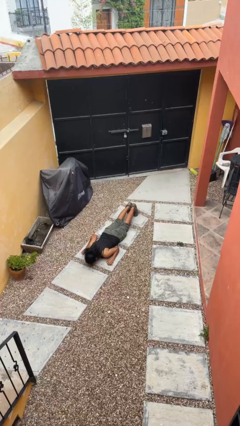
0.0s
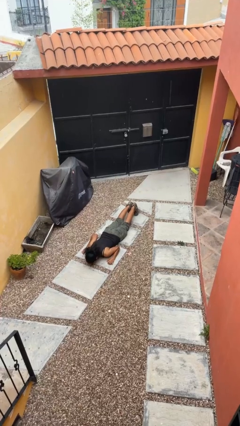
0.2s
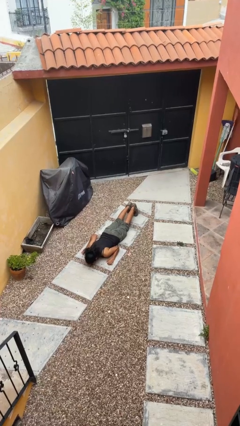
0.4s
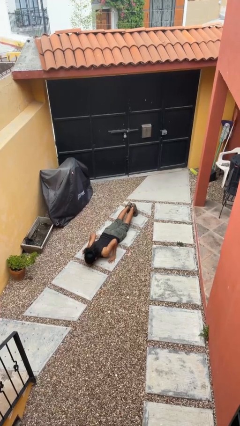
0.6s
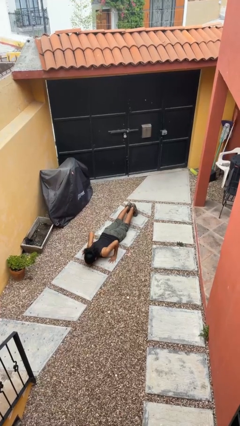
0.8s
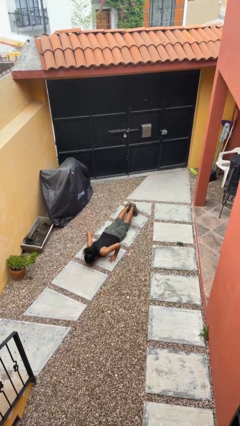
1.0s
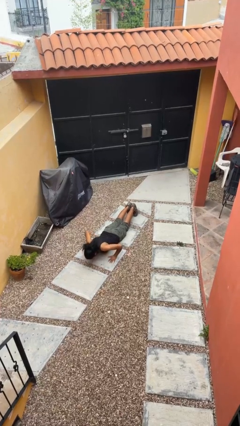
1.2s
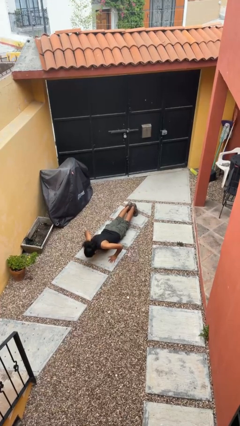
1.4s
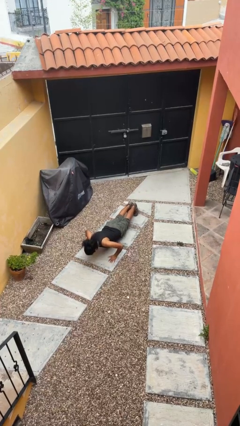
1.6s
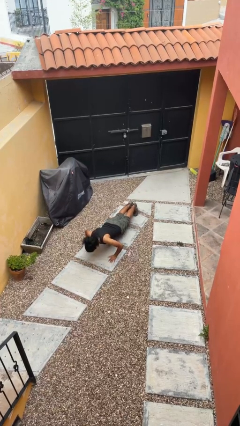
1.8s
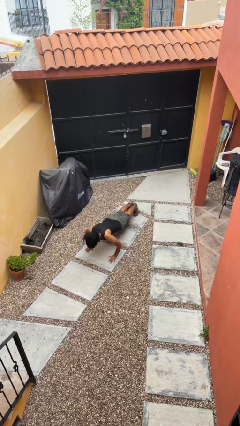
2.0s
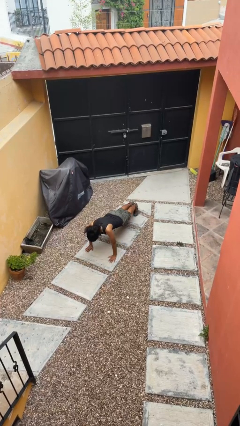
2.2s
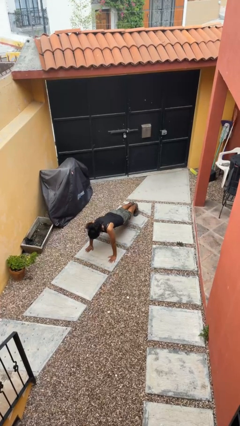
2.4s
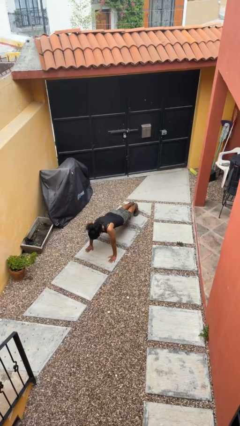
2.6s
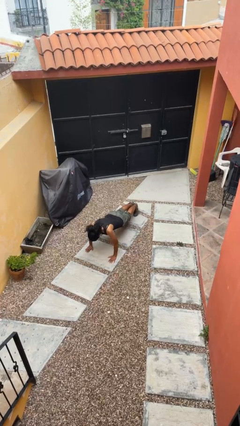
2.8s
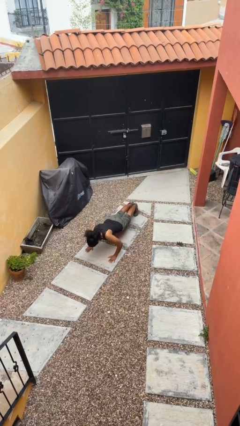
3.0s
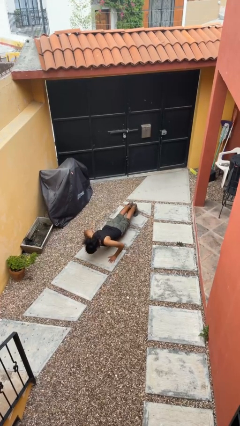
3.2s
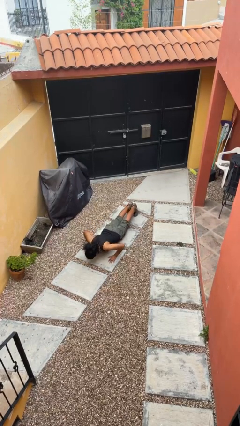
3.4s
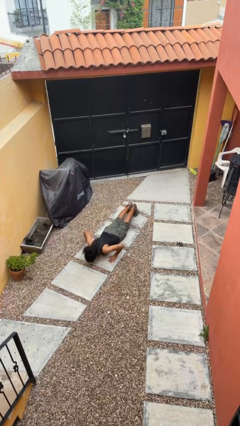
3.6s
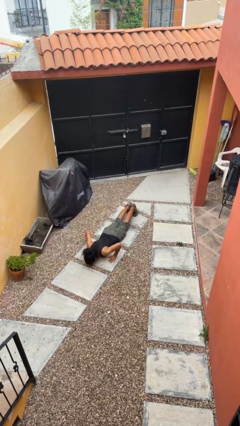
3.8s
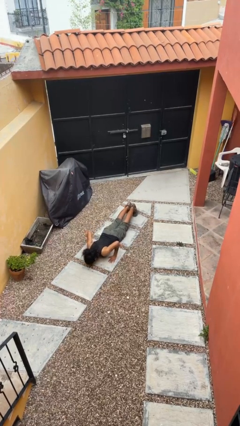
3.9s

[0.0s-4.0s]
person exercises with pushup

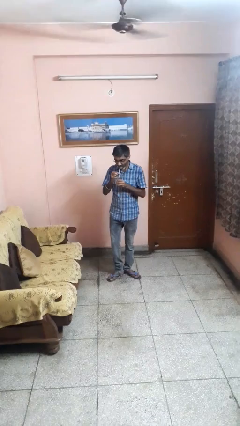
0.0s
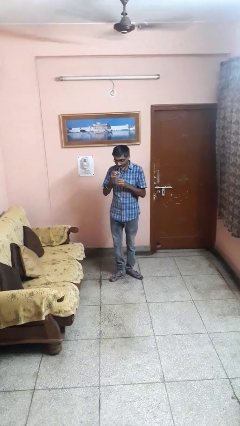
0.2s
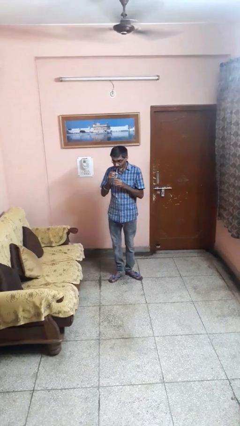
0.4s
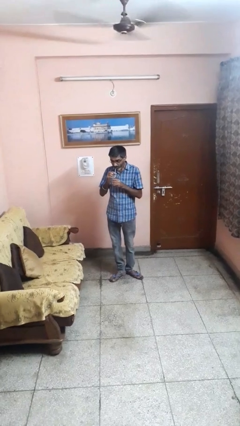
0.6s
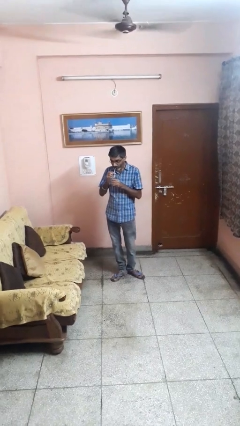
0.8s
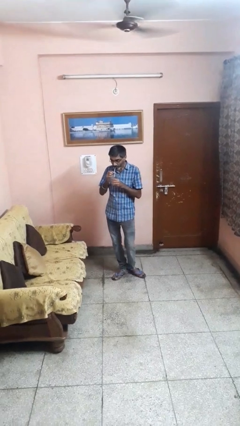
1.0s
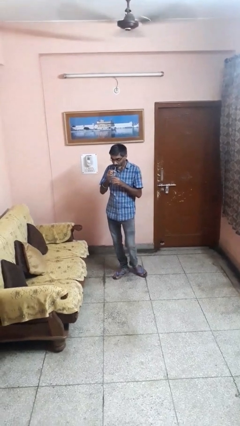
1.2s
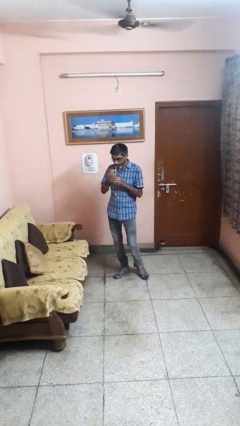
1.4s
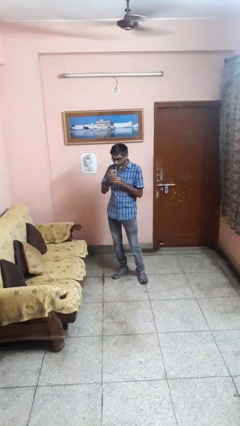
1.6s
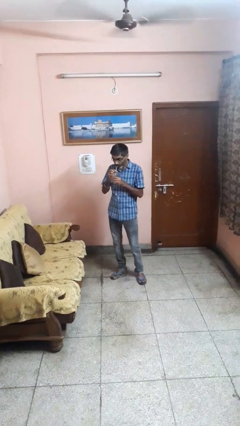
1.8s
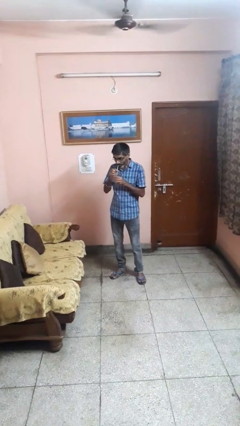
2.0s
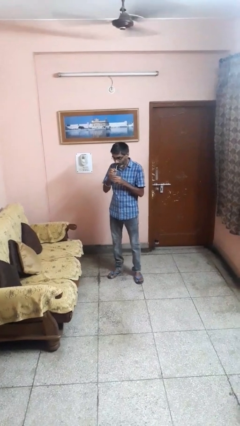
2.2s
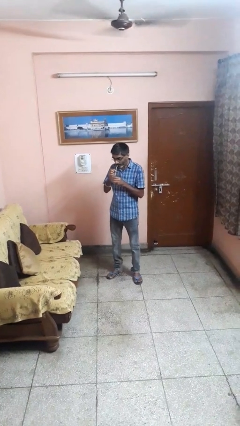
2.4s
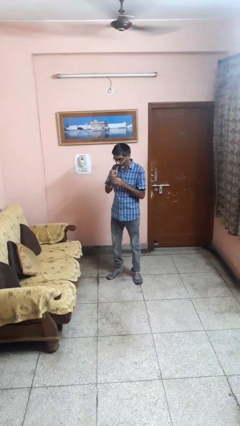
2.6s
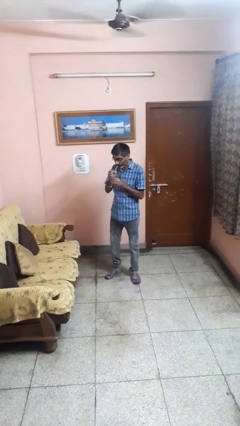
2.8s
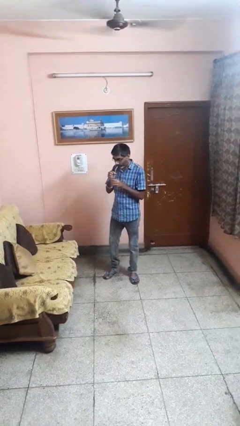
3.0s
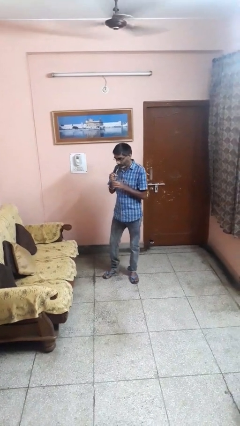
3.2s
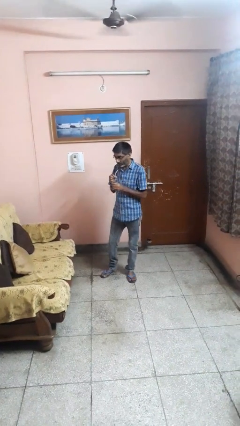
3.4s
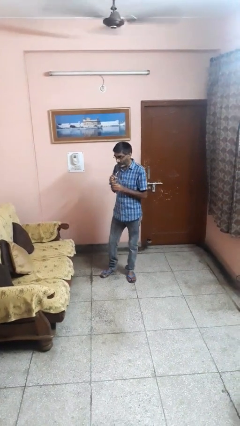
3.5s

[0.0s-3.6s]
person drinks from straw

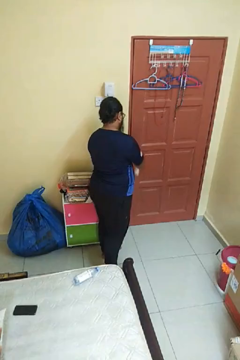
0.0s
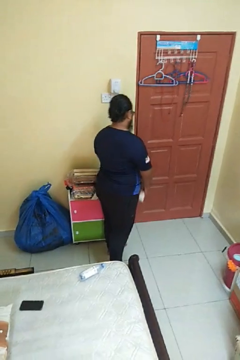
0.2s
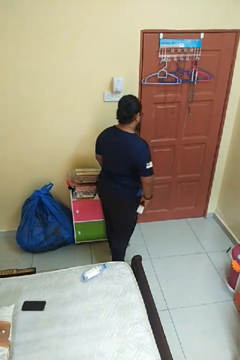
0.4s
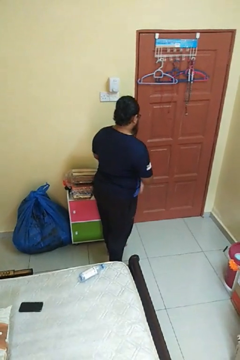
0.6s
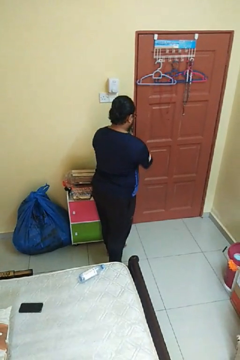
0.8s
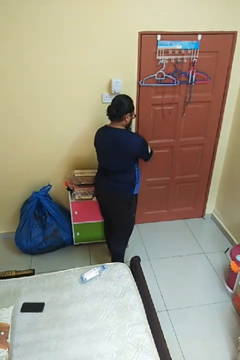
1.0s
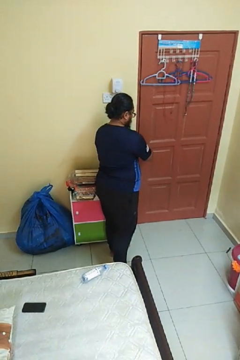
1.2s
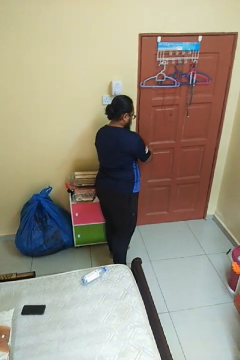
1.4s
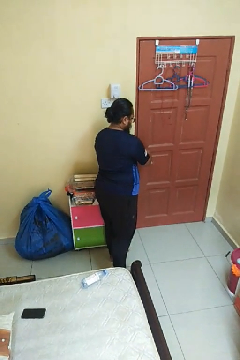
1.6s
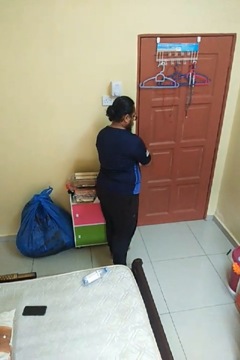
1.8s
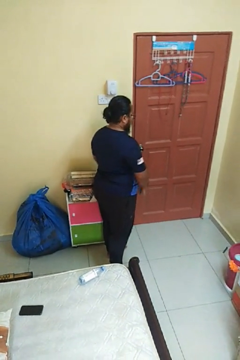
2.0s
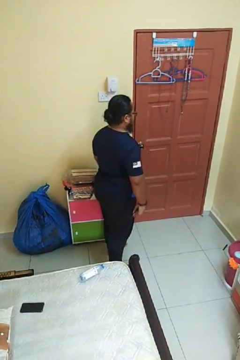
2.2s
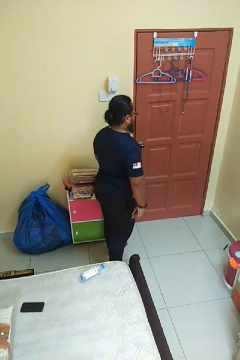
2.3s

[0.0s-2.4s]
person locks door with keys

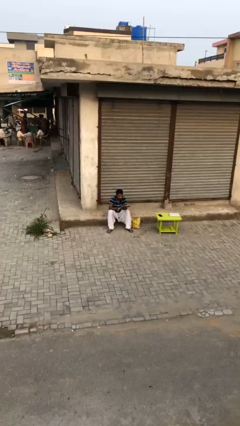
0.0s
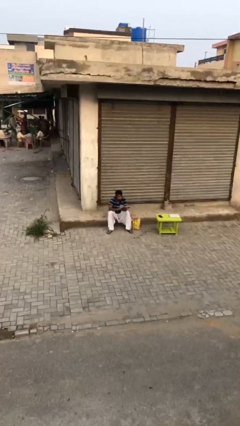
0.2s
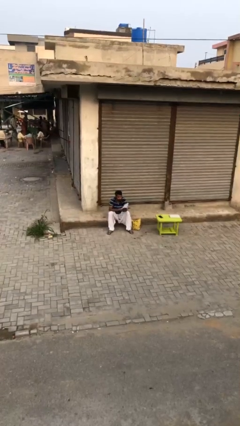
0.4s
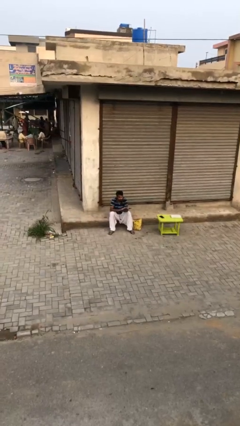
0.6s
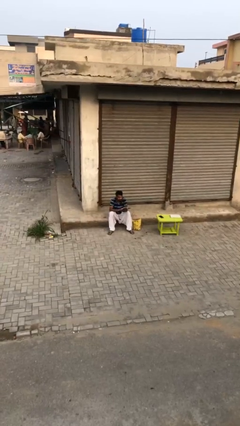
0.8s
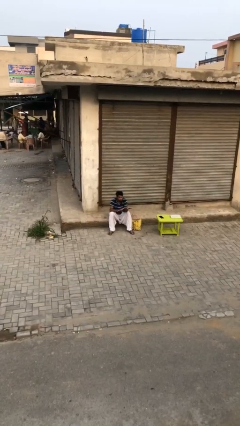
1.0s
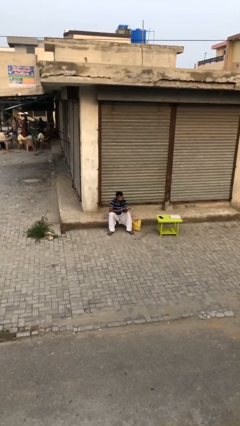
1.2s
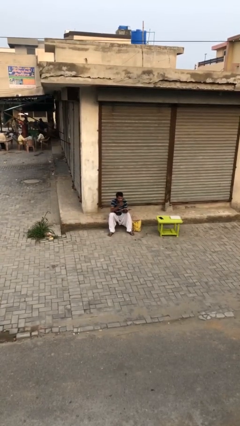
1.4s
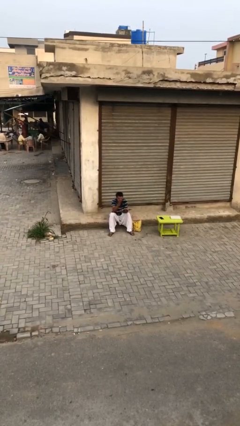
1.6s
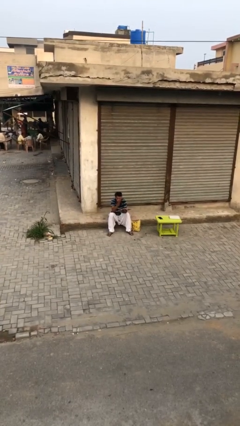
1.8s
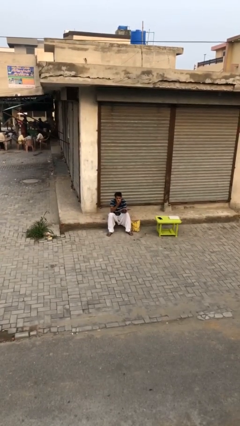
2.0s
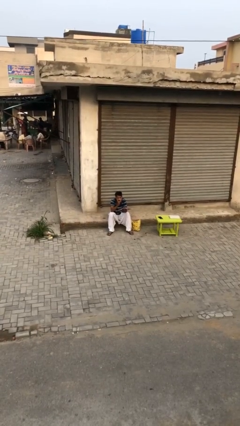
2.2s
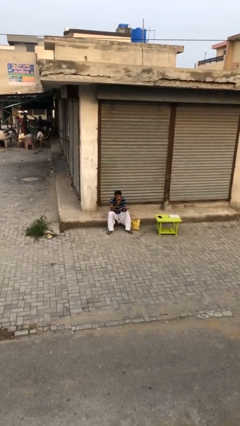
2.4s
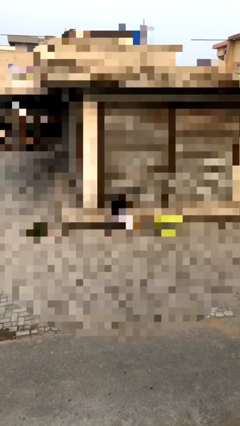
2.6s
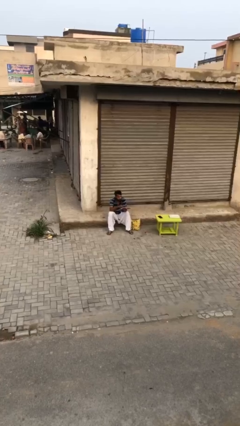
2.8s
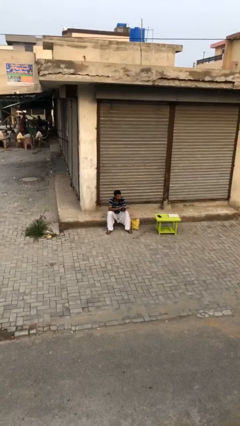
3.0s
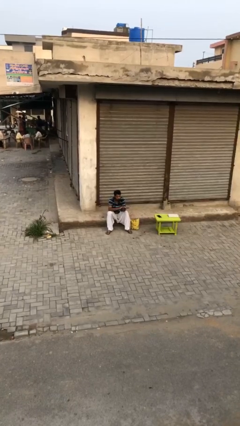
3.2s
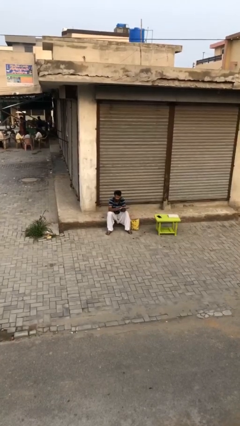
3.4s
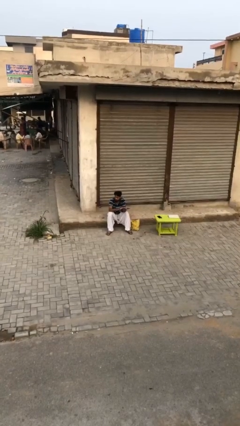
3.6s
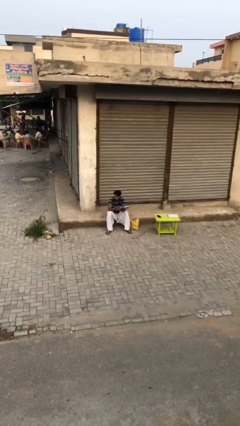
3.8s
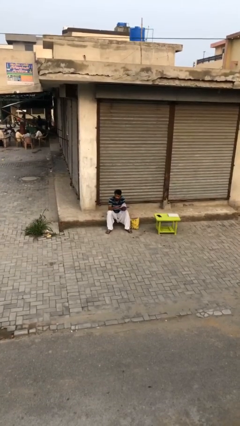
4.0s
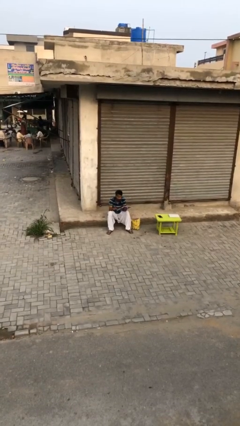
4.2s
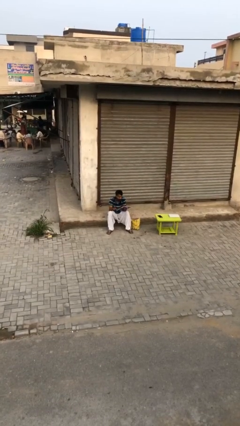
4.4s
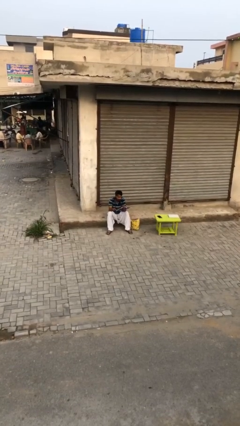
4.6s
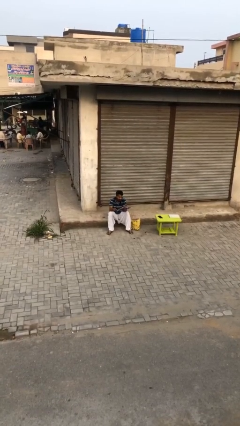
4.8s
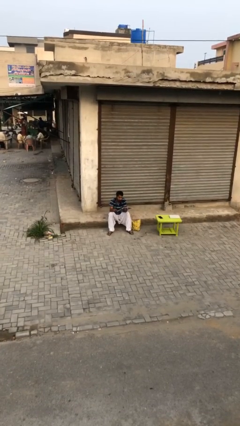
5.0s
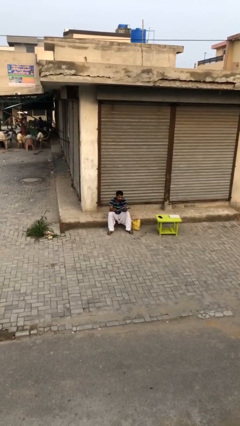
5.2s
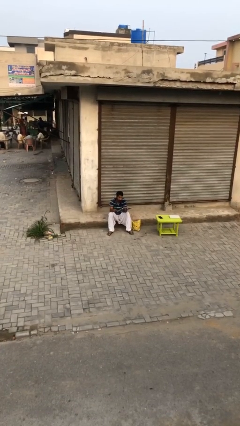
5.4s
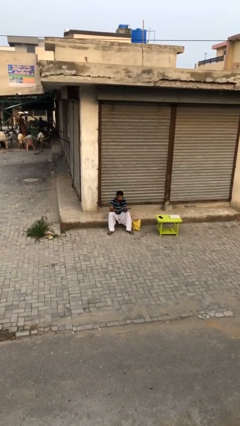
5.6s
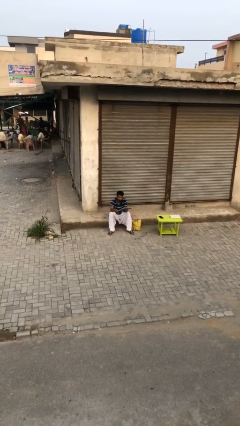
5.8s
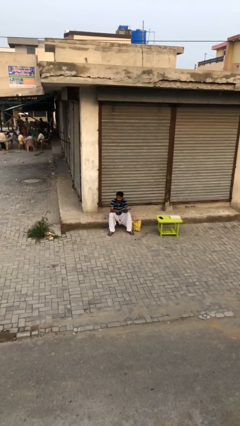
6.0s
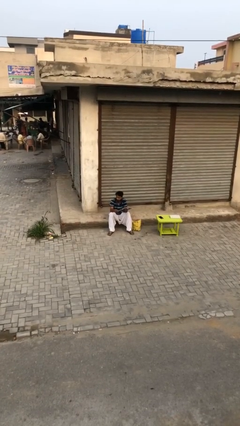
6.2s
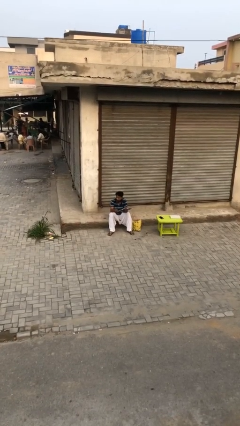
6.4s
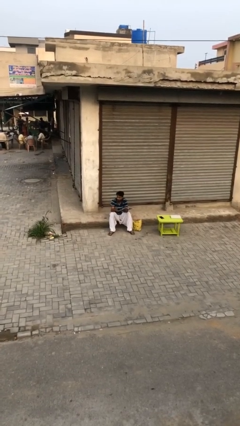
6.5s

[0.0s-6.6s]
person reads document

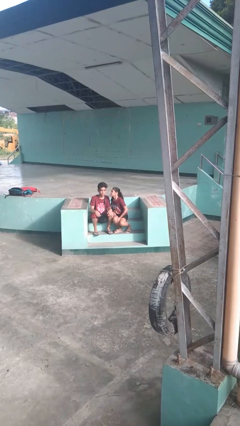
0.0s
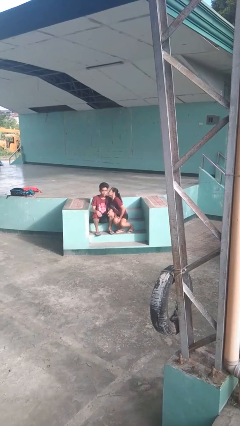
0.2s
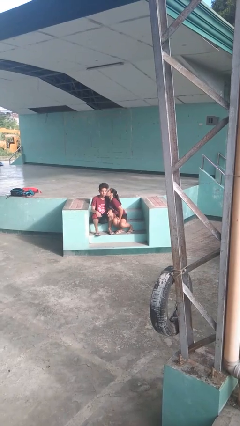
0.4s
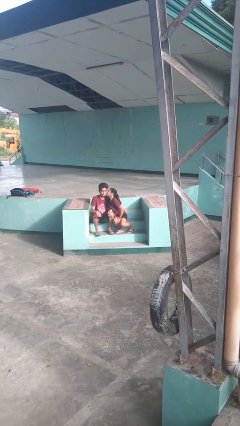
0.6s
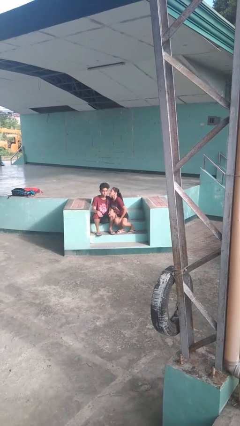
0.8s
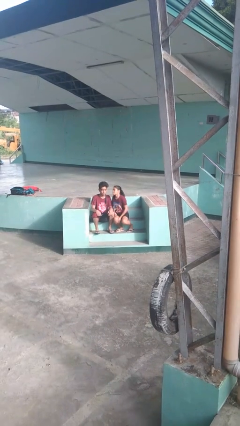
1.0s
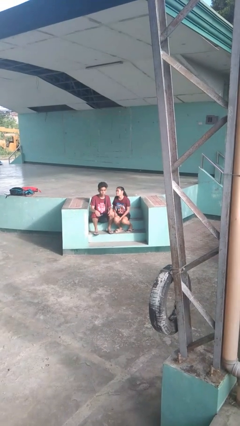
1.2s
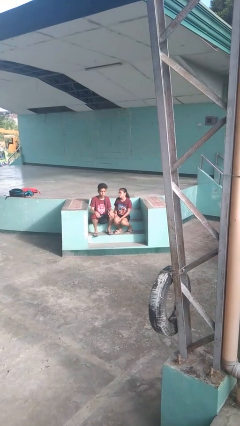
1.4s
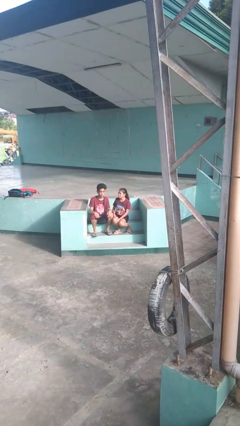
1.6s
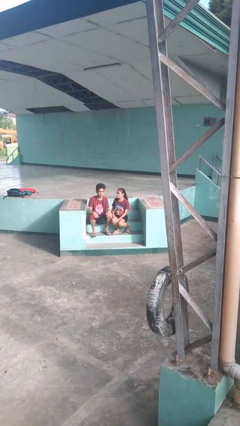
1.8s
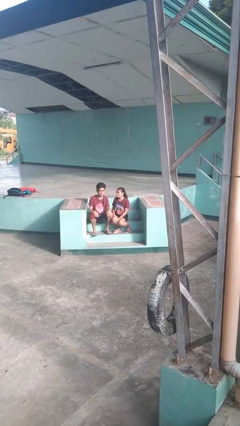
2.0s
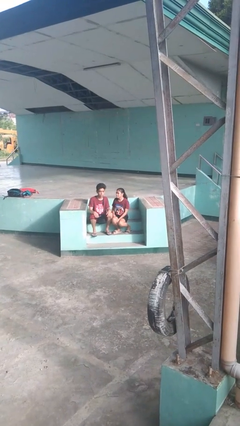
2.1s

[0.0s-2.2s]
person kisses cheek of person
